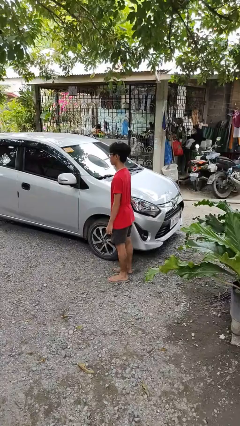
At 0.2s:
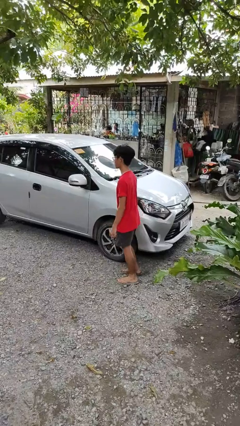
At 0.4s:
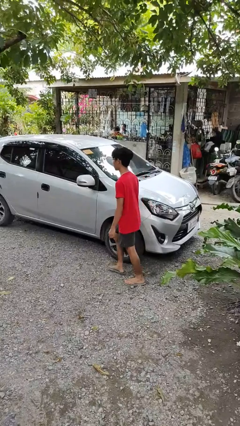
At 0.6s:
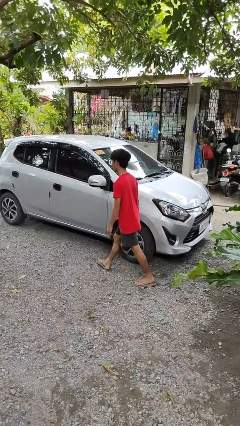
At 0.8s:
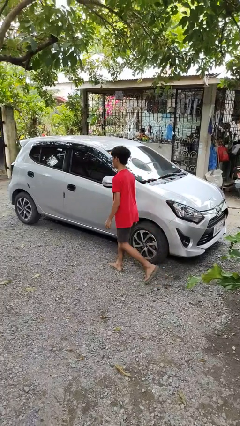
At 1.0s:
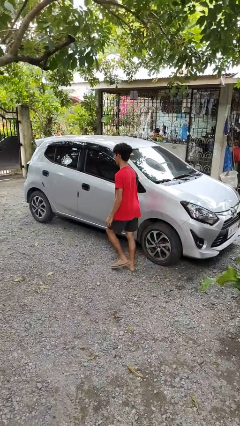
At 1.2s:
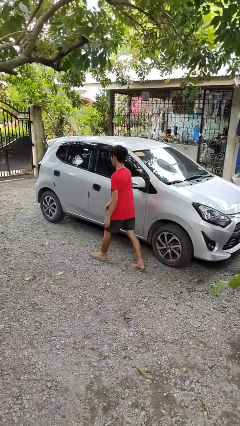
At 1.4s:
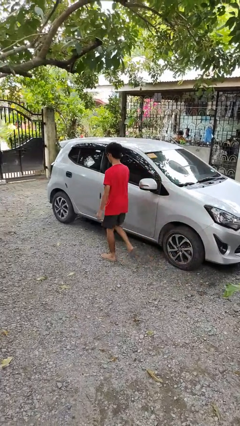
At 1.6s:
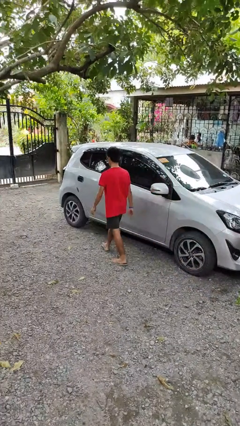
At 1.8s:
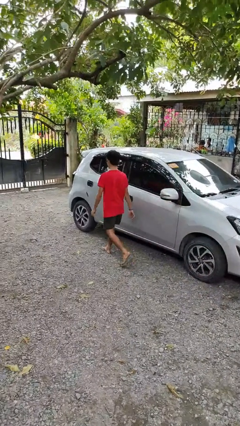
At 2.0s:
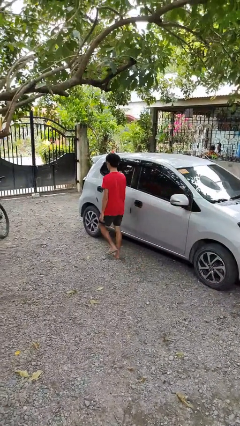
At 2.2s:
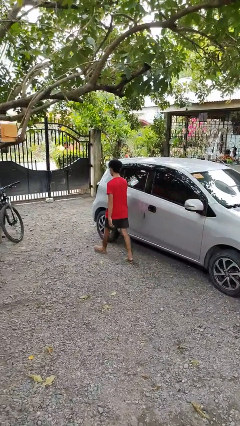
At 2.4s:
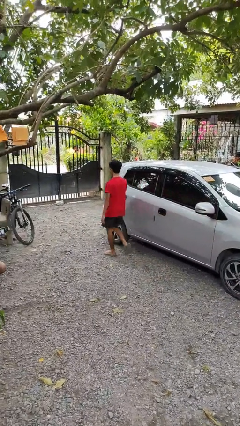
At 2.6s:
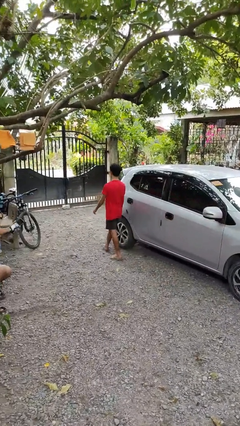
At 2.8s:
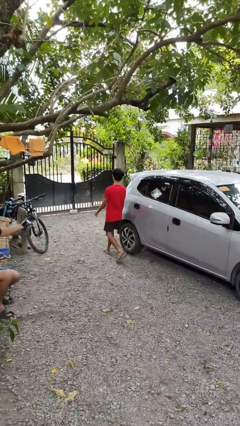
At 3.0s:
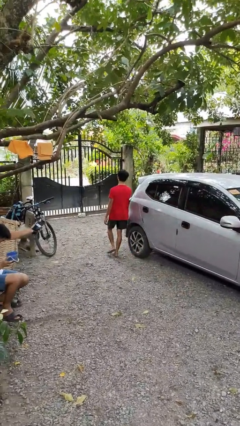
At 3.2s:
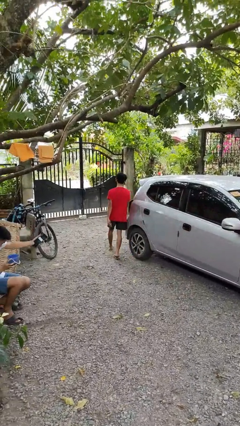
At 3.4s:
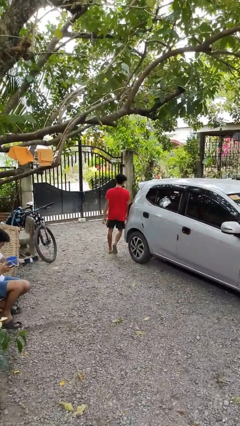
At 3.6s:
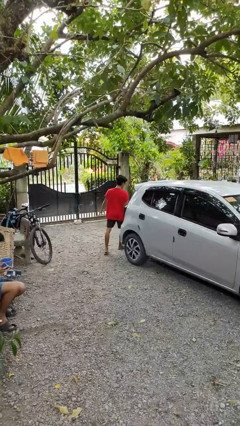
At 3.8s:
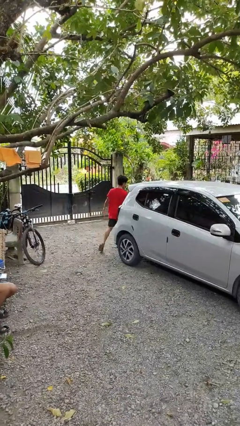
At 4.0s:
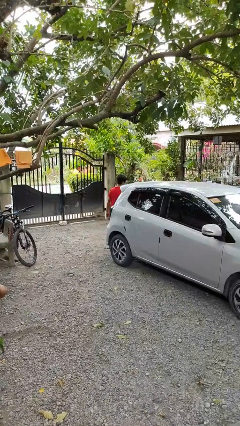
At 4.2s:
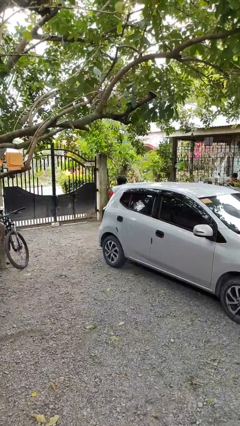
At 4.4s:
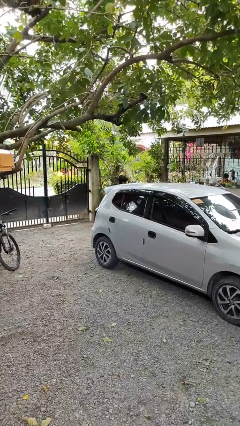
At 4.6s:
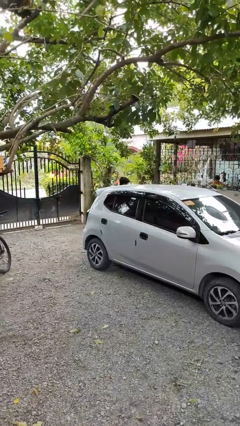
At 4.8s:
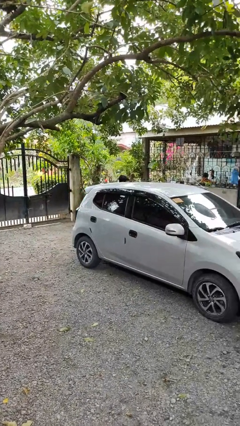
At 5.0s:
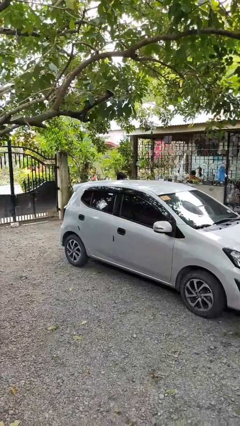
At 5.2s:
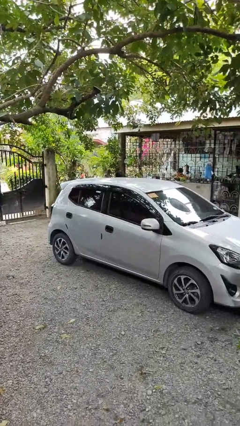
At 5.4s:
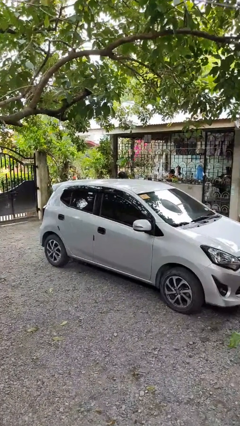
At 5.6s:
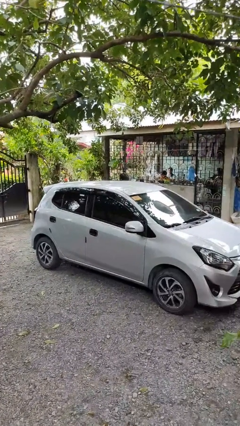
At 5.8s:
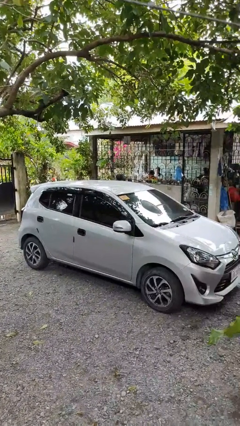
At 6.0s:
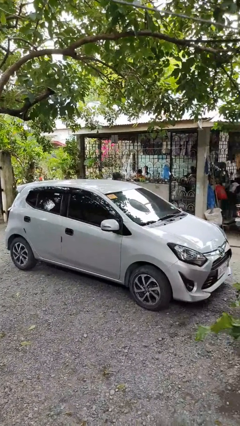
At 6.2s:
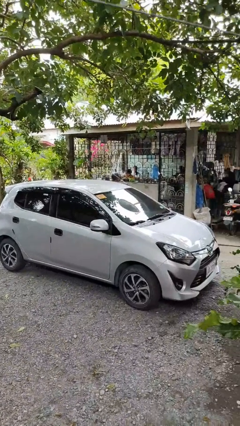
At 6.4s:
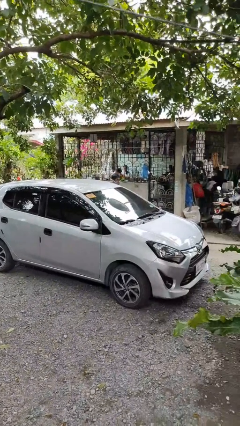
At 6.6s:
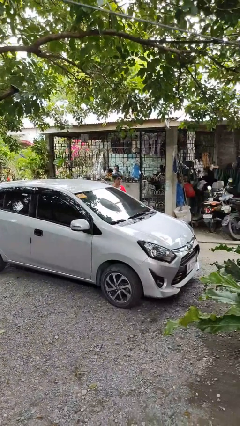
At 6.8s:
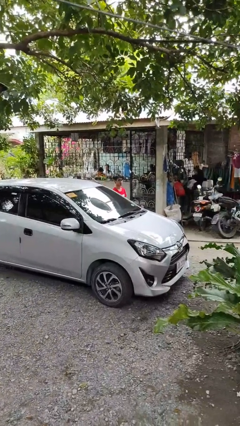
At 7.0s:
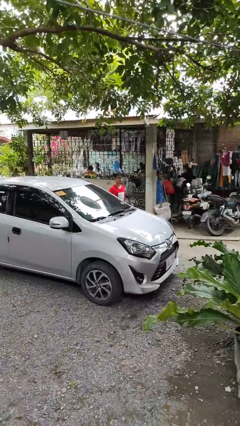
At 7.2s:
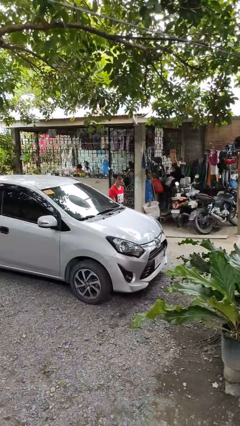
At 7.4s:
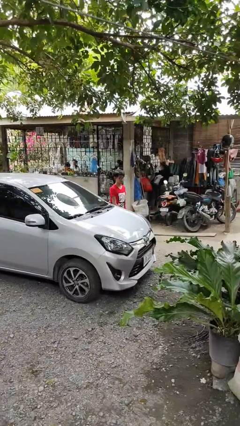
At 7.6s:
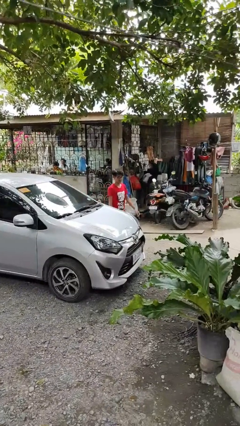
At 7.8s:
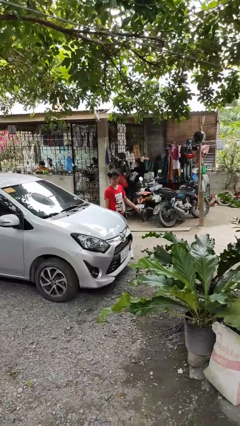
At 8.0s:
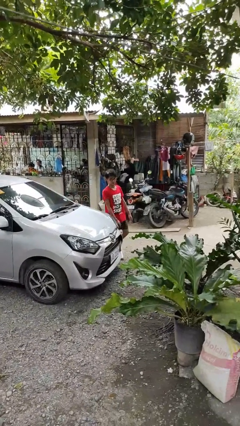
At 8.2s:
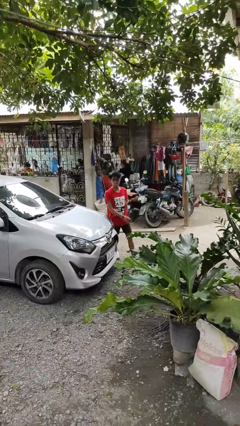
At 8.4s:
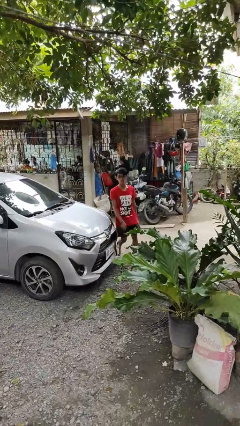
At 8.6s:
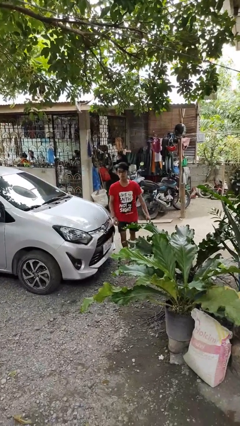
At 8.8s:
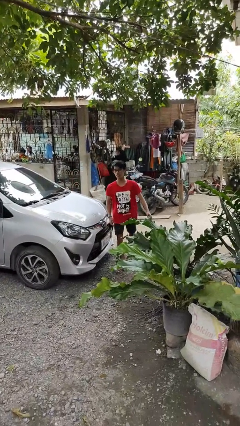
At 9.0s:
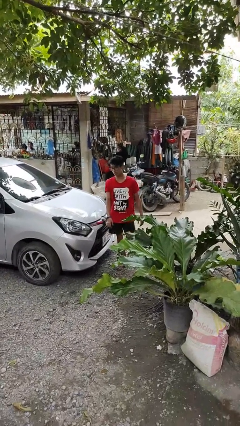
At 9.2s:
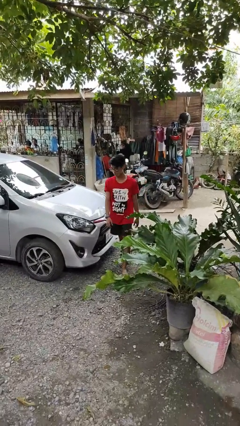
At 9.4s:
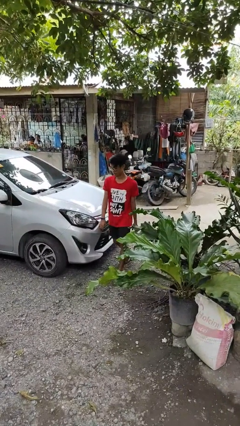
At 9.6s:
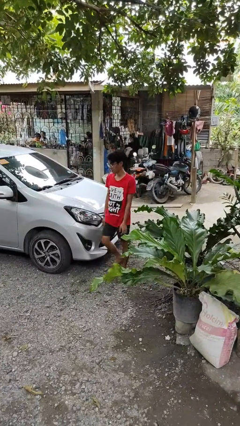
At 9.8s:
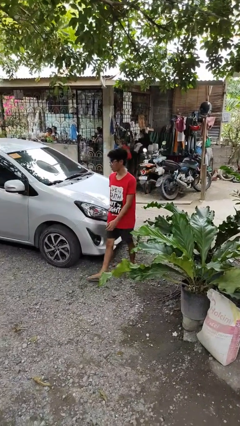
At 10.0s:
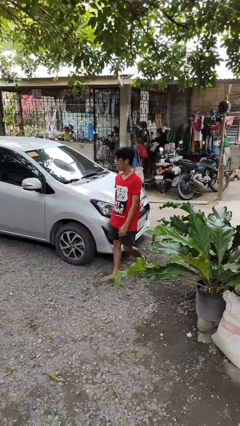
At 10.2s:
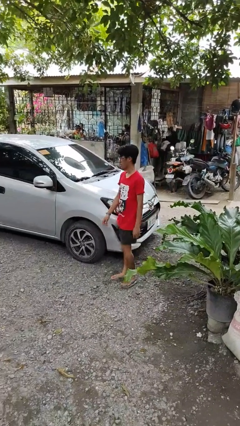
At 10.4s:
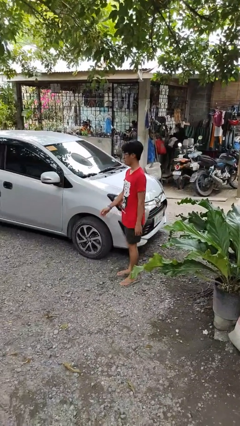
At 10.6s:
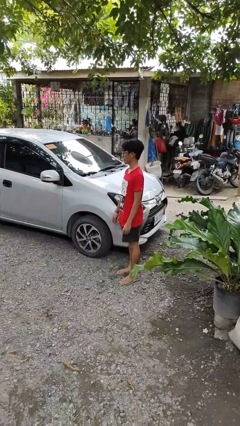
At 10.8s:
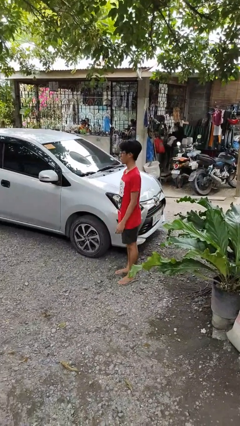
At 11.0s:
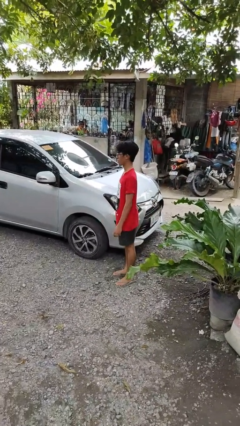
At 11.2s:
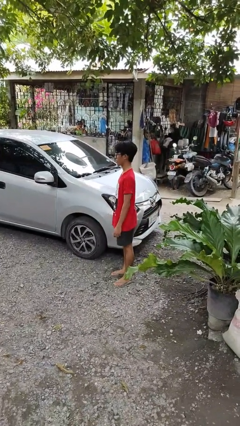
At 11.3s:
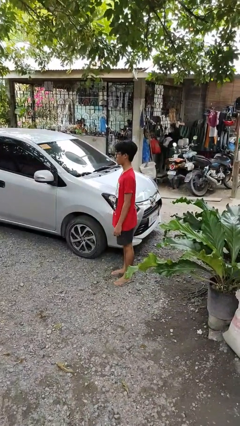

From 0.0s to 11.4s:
person walks around car

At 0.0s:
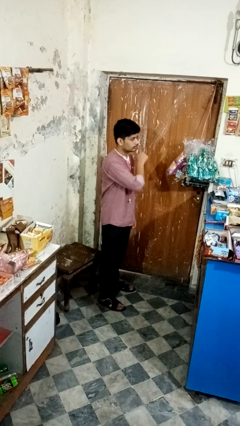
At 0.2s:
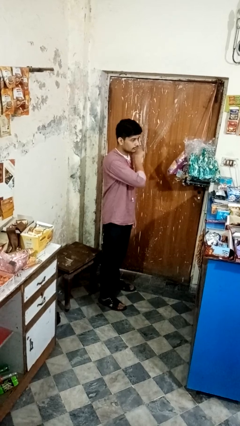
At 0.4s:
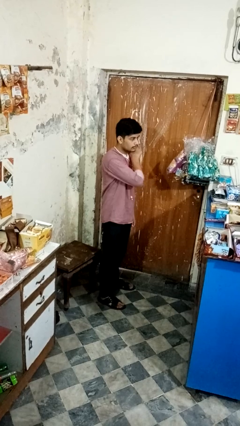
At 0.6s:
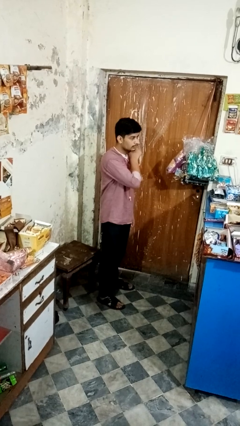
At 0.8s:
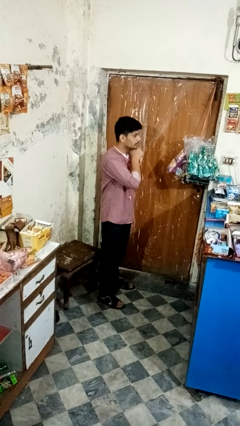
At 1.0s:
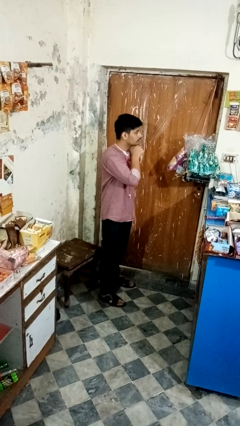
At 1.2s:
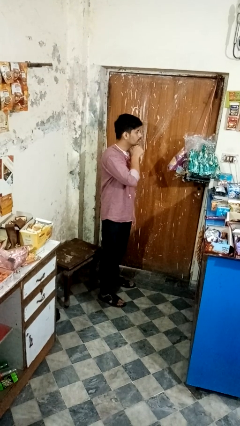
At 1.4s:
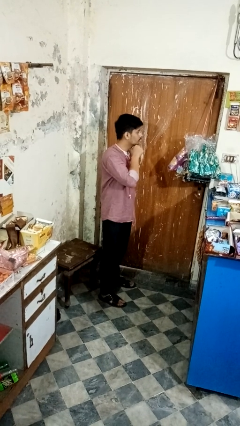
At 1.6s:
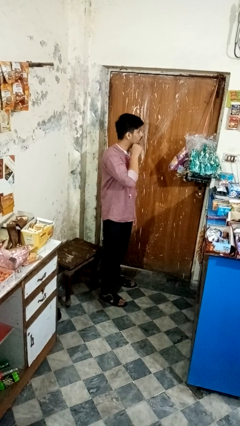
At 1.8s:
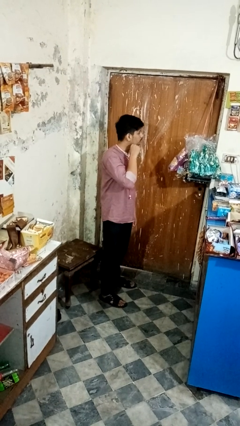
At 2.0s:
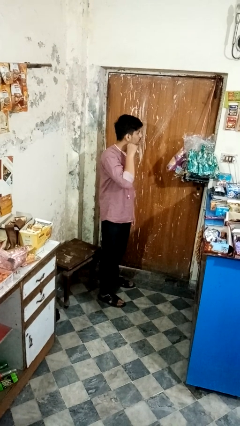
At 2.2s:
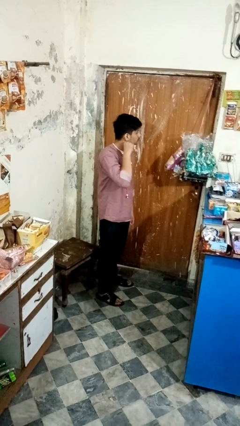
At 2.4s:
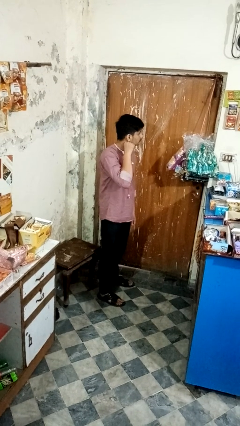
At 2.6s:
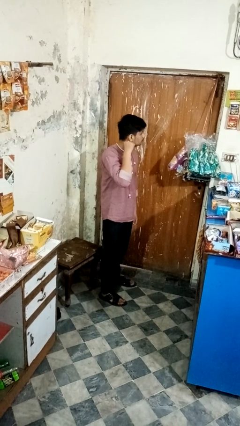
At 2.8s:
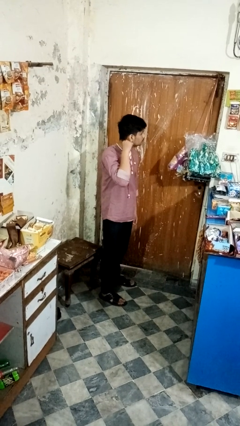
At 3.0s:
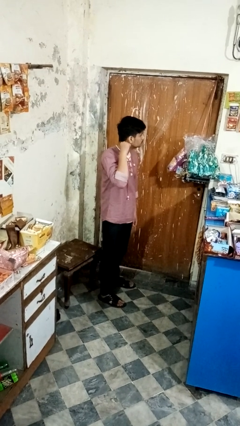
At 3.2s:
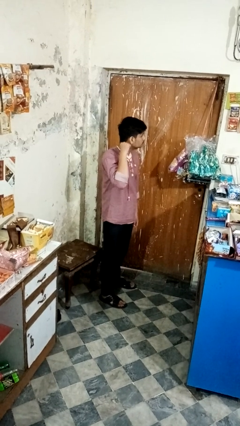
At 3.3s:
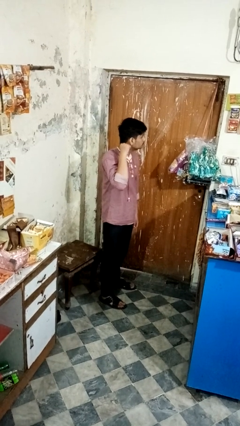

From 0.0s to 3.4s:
person gestures cut

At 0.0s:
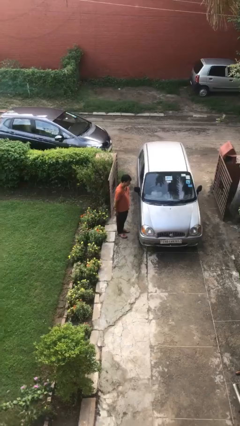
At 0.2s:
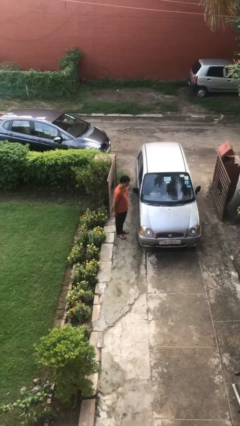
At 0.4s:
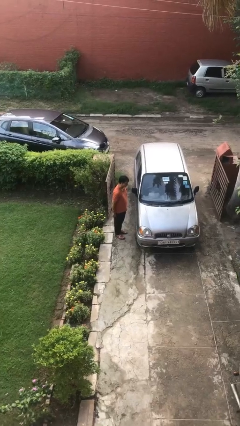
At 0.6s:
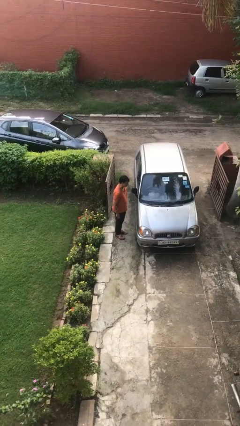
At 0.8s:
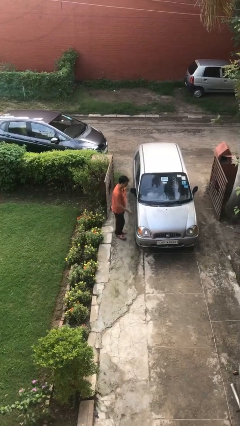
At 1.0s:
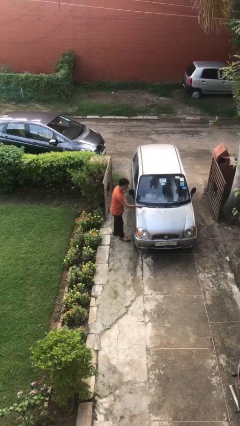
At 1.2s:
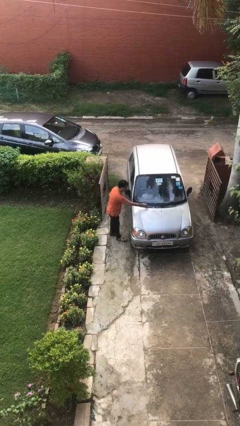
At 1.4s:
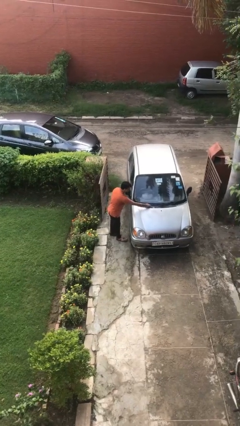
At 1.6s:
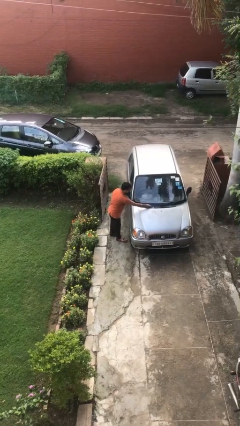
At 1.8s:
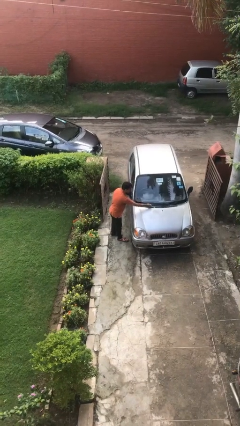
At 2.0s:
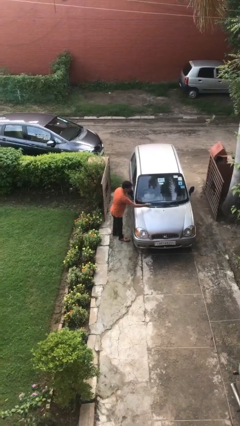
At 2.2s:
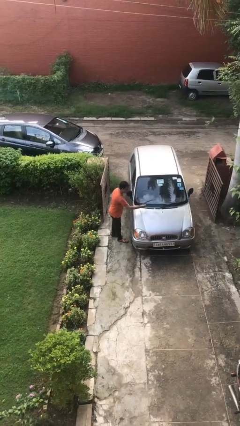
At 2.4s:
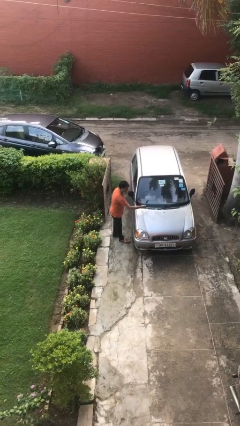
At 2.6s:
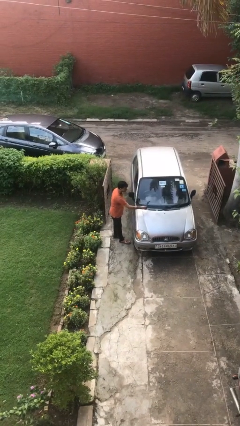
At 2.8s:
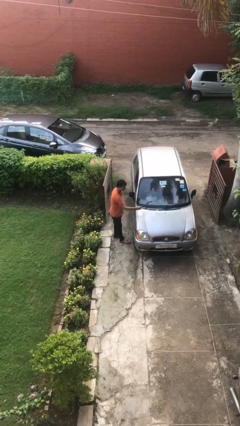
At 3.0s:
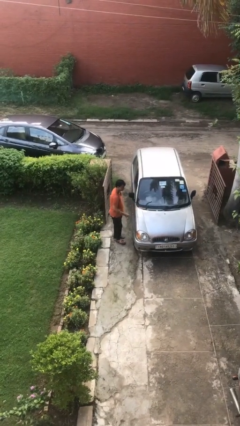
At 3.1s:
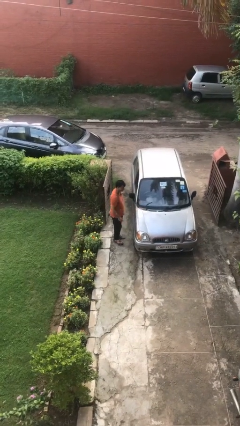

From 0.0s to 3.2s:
person flips up car wipers
